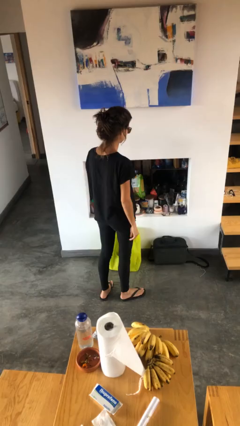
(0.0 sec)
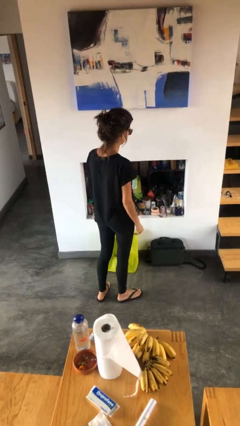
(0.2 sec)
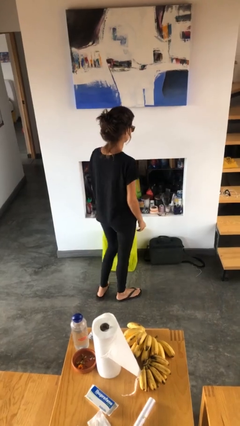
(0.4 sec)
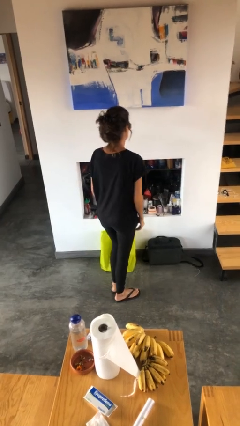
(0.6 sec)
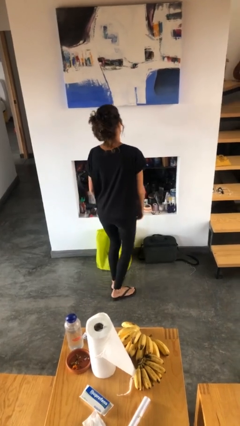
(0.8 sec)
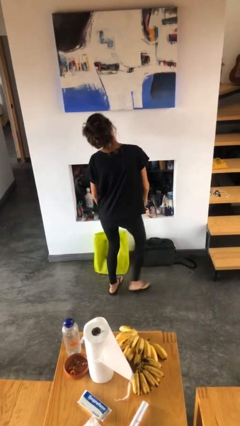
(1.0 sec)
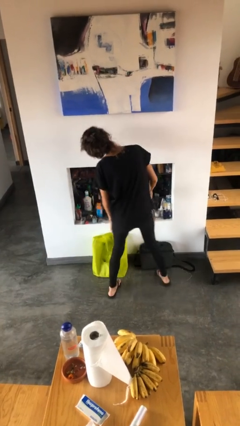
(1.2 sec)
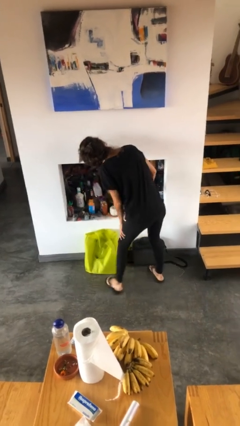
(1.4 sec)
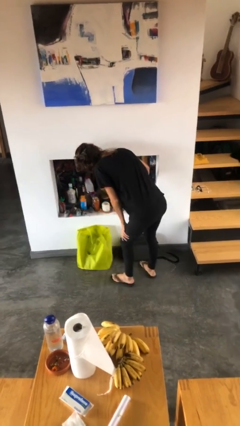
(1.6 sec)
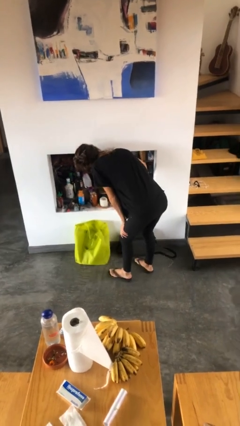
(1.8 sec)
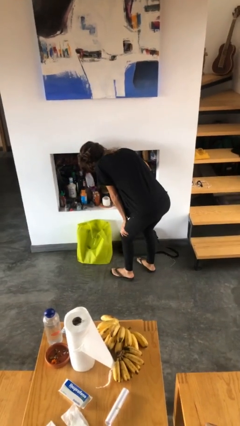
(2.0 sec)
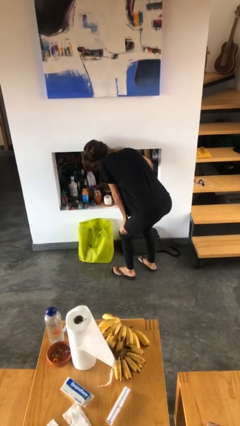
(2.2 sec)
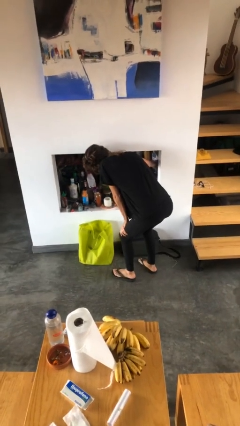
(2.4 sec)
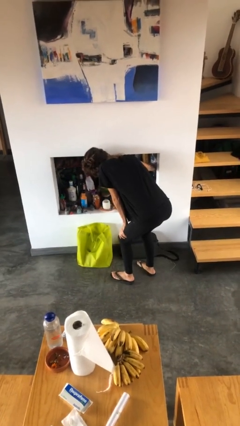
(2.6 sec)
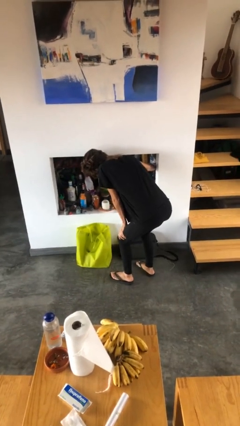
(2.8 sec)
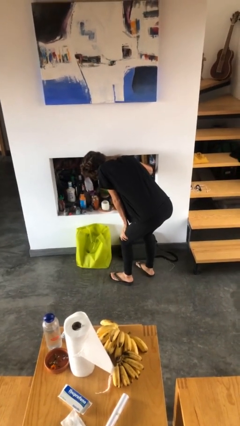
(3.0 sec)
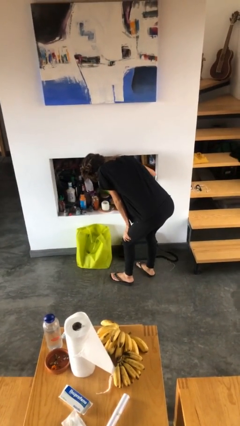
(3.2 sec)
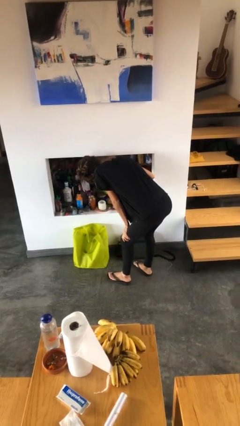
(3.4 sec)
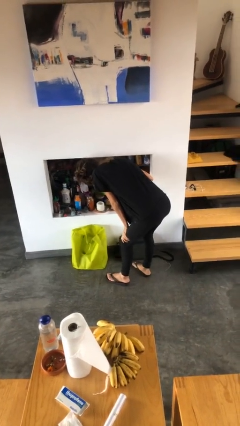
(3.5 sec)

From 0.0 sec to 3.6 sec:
person searches in cabinet

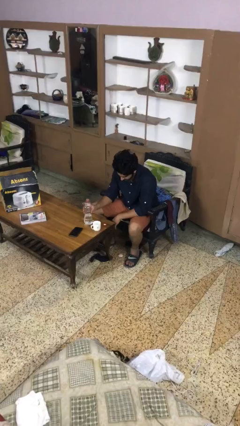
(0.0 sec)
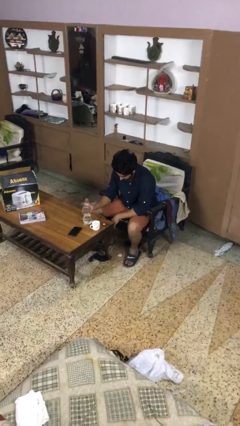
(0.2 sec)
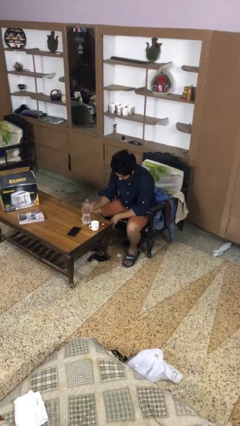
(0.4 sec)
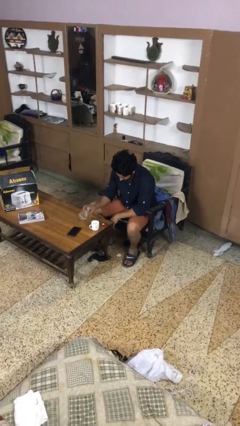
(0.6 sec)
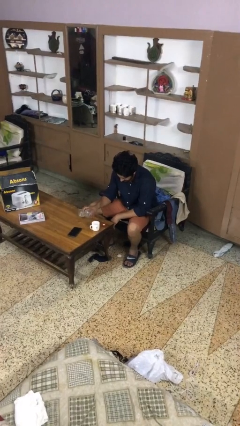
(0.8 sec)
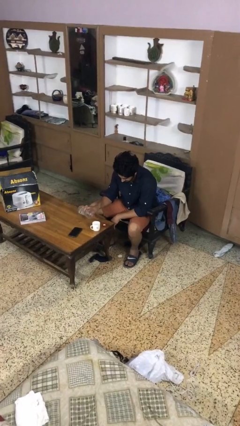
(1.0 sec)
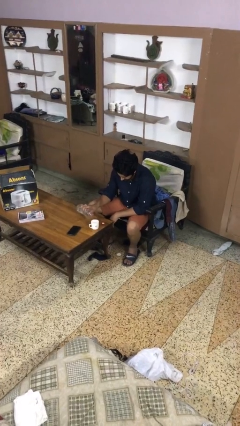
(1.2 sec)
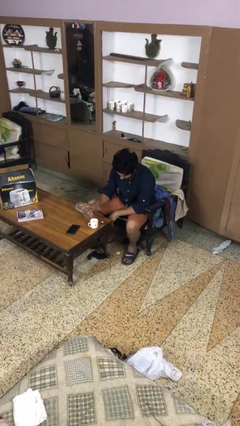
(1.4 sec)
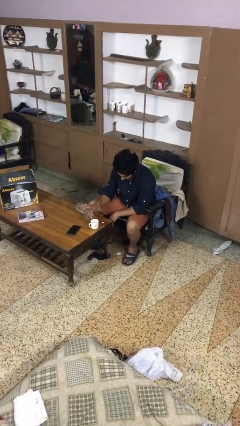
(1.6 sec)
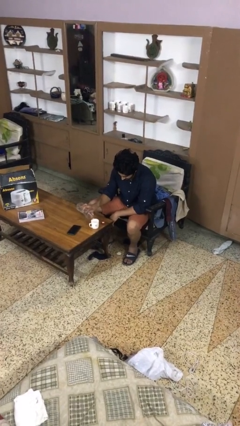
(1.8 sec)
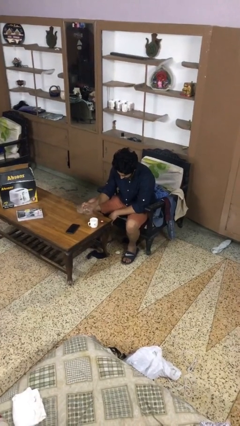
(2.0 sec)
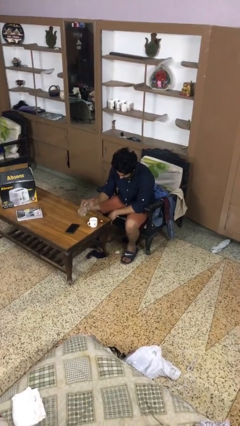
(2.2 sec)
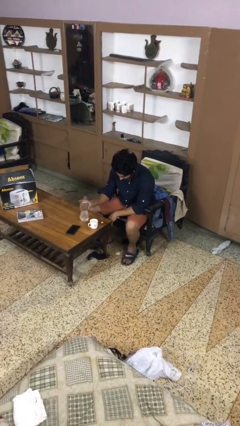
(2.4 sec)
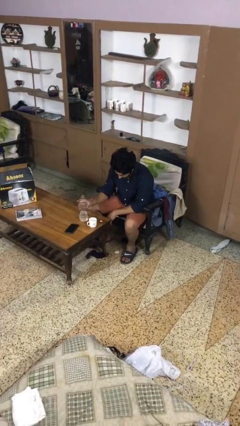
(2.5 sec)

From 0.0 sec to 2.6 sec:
person pours liquid into cup

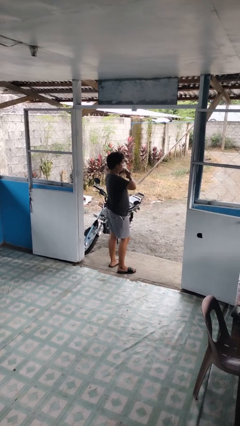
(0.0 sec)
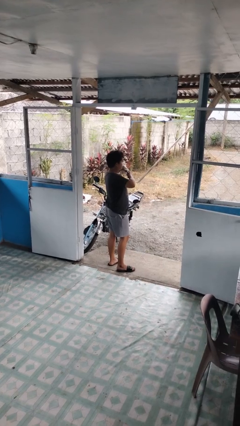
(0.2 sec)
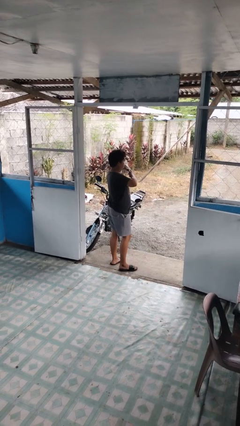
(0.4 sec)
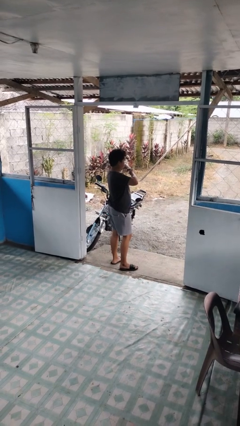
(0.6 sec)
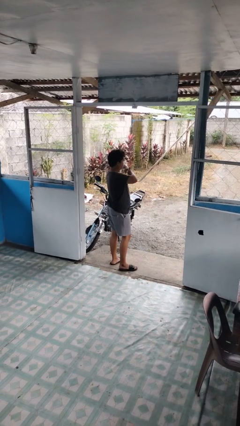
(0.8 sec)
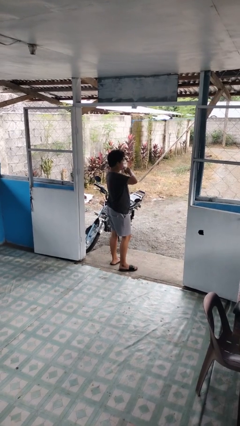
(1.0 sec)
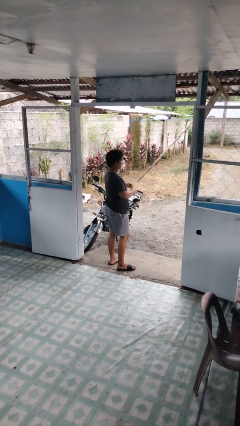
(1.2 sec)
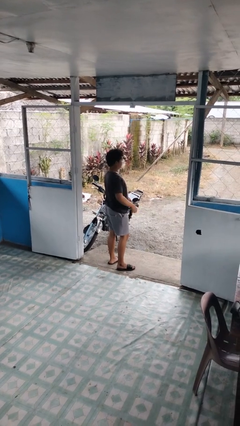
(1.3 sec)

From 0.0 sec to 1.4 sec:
person cracks knuckles

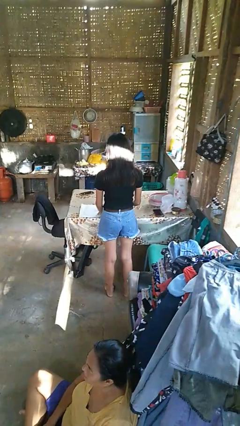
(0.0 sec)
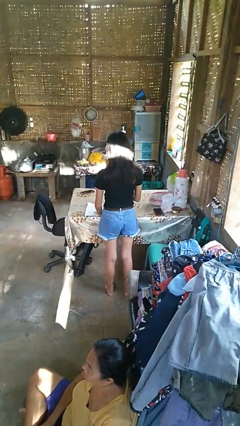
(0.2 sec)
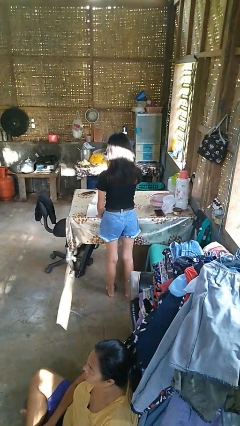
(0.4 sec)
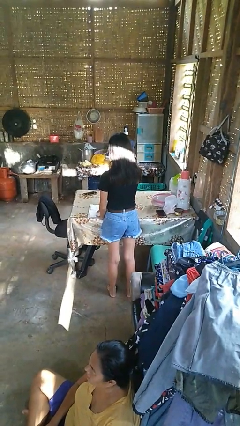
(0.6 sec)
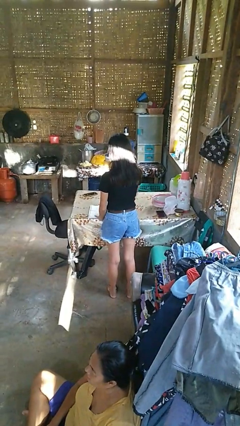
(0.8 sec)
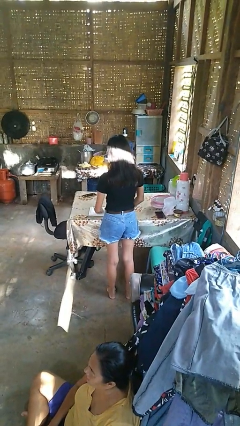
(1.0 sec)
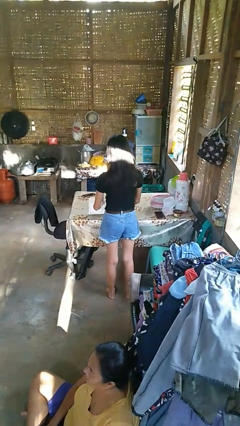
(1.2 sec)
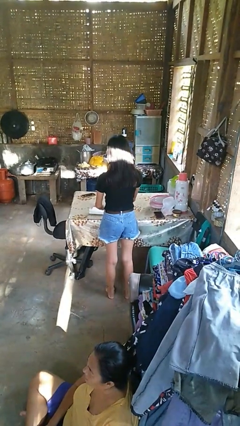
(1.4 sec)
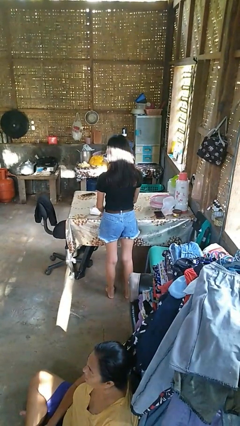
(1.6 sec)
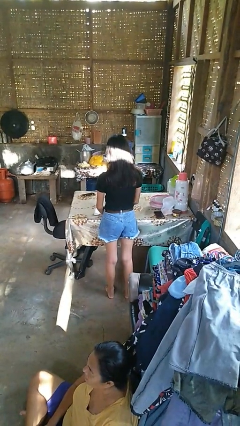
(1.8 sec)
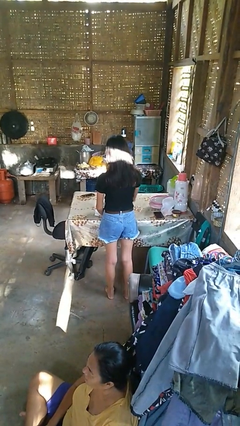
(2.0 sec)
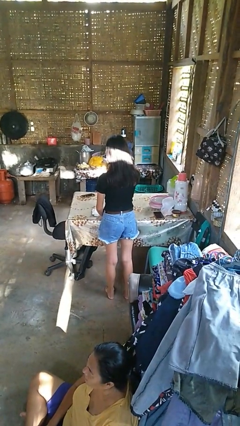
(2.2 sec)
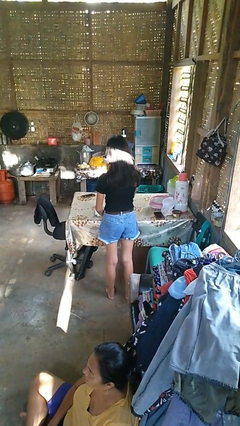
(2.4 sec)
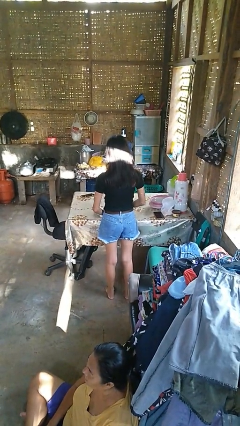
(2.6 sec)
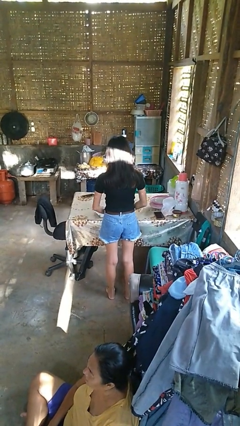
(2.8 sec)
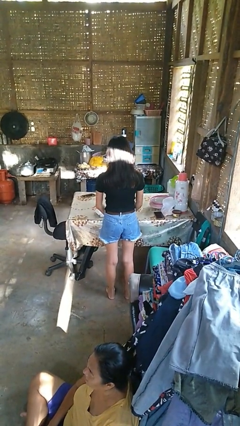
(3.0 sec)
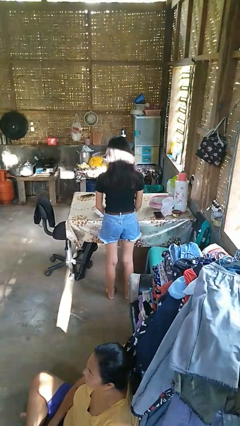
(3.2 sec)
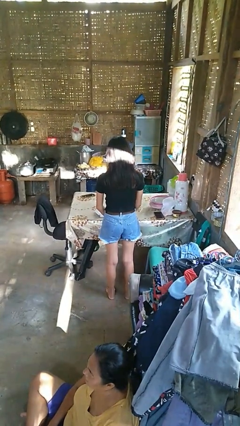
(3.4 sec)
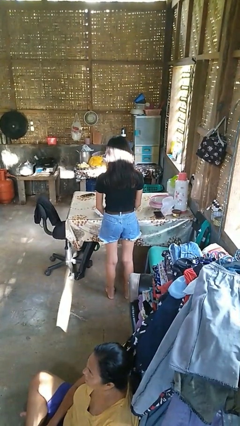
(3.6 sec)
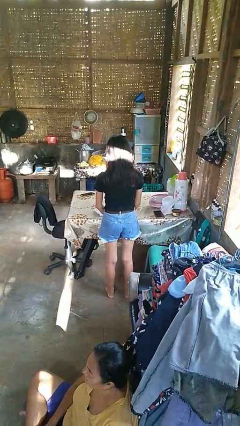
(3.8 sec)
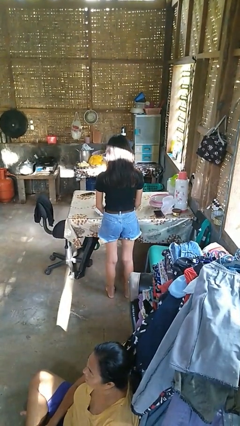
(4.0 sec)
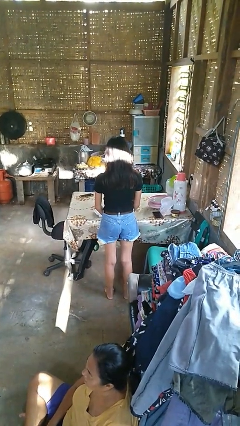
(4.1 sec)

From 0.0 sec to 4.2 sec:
person folds tablecloth

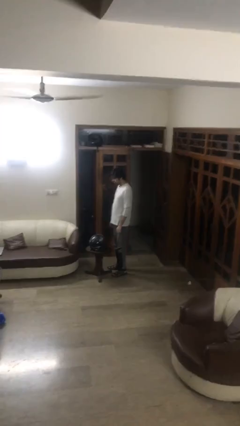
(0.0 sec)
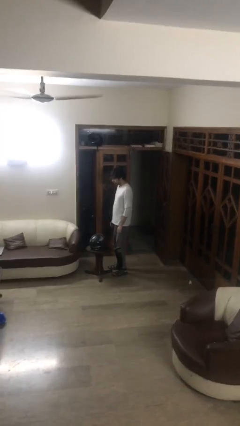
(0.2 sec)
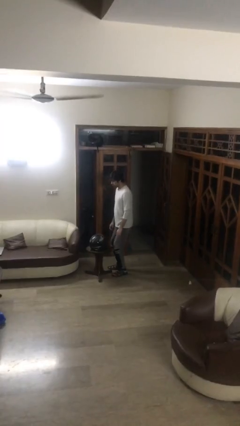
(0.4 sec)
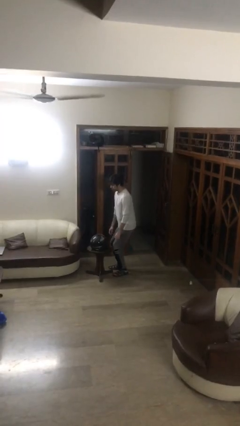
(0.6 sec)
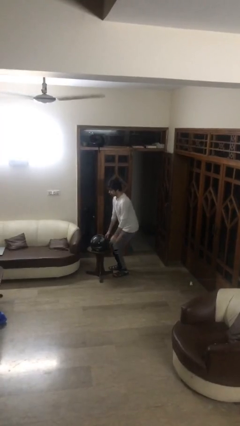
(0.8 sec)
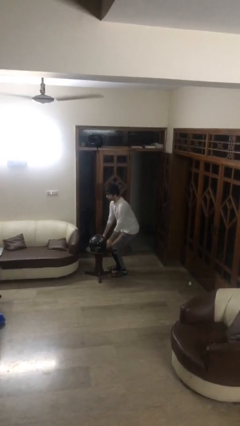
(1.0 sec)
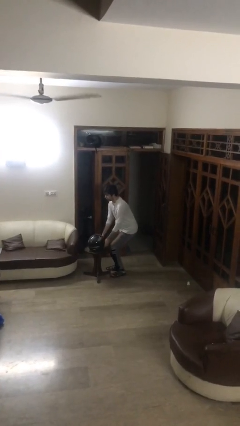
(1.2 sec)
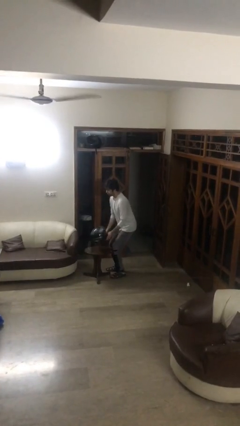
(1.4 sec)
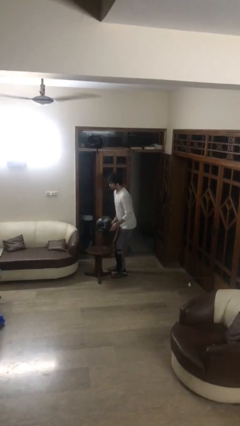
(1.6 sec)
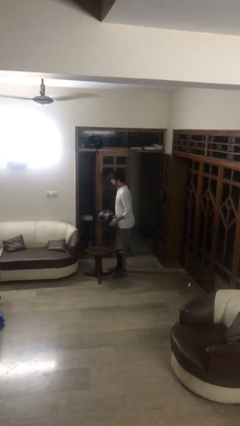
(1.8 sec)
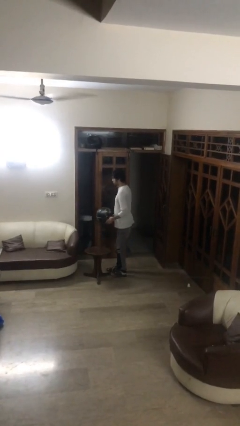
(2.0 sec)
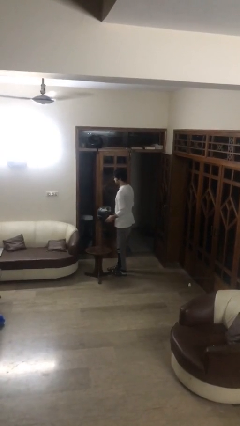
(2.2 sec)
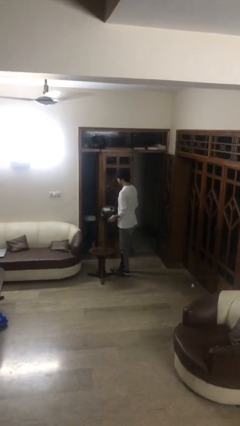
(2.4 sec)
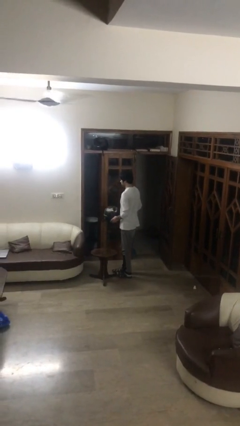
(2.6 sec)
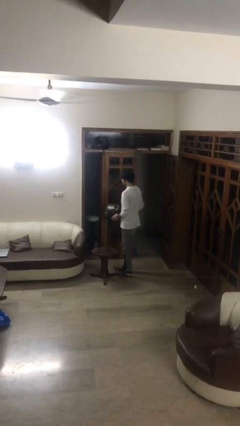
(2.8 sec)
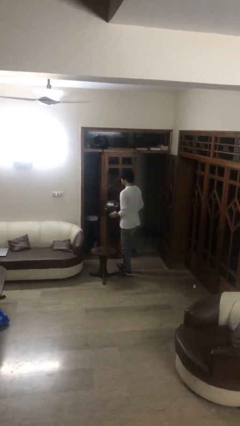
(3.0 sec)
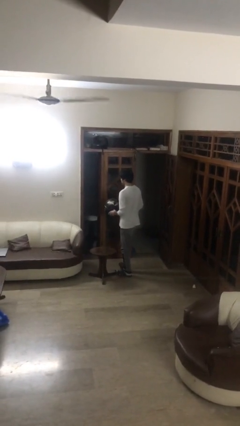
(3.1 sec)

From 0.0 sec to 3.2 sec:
person picks up object from table

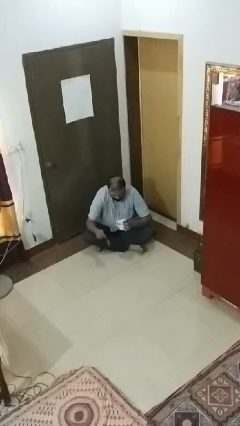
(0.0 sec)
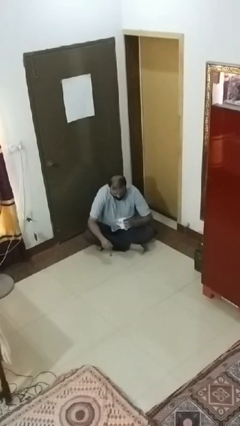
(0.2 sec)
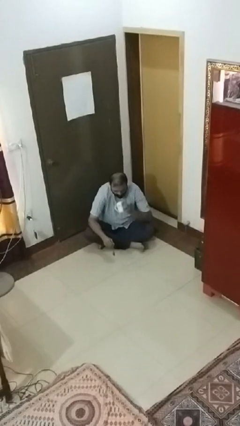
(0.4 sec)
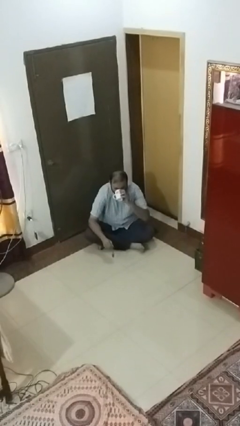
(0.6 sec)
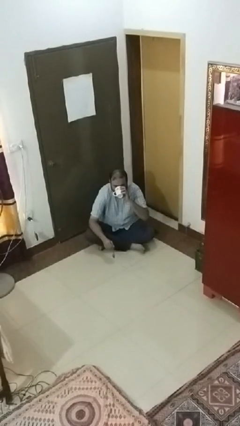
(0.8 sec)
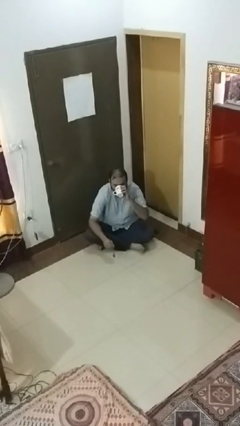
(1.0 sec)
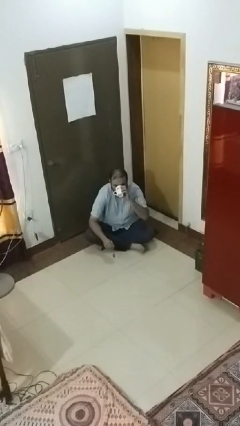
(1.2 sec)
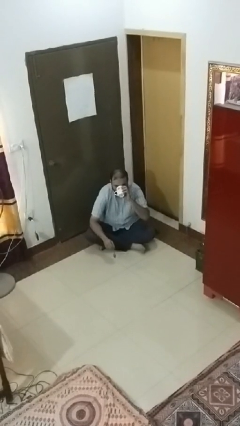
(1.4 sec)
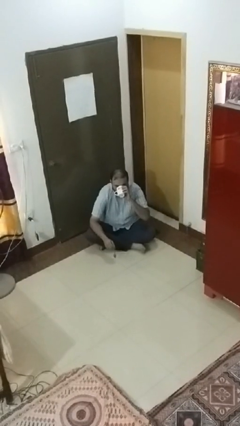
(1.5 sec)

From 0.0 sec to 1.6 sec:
person drinks from mug

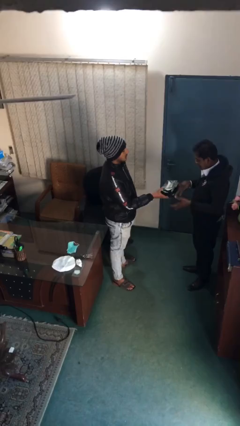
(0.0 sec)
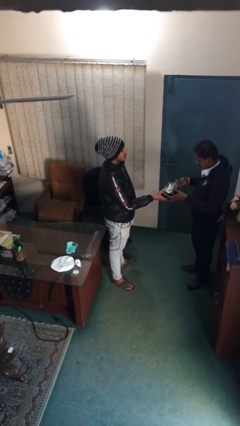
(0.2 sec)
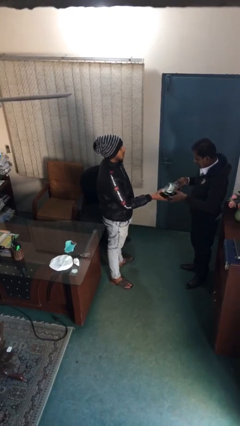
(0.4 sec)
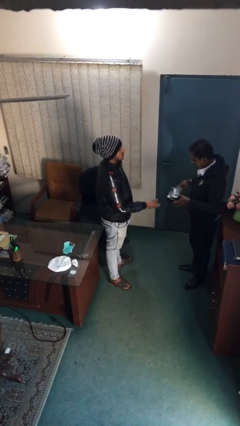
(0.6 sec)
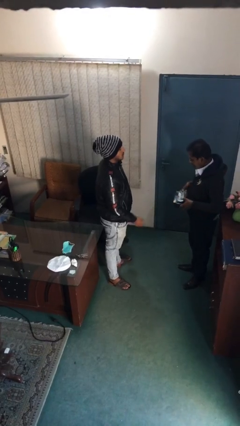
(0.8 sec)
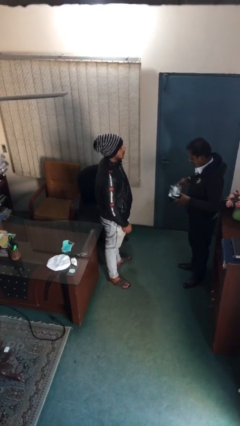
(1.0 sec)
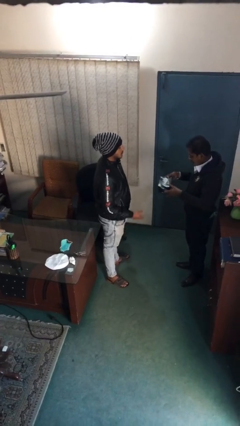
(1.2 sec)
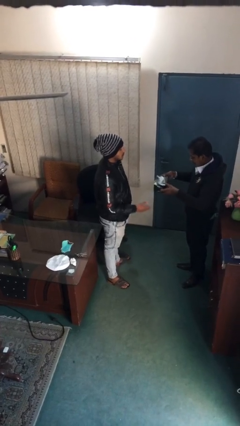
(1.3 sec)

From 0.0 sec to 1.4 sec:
person transfers object to person
